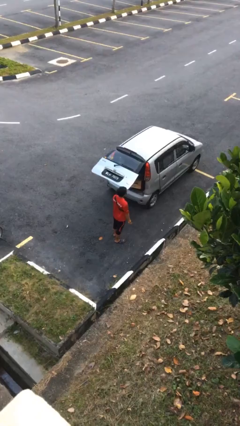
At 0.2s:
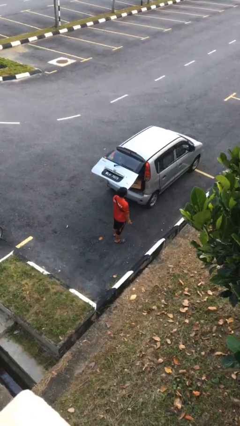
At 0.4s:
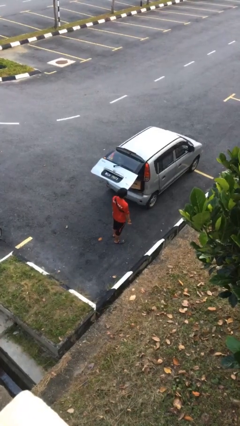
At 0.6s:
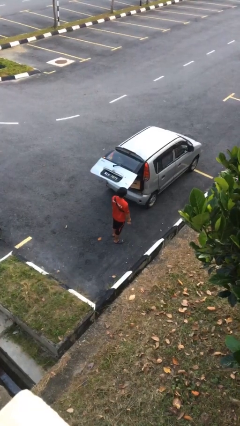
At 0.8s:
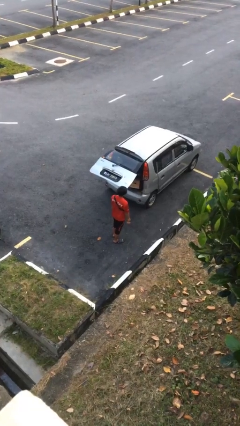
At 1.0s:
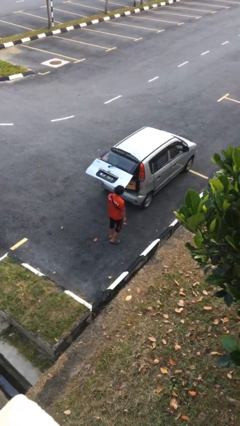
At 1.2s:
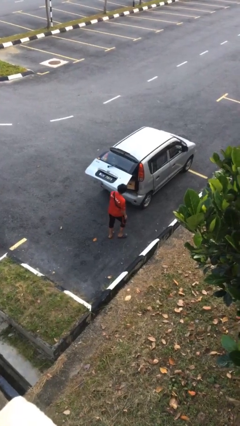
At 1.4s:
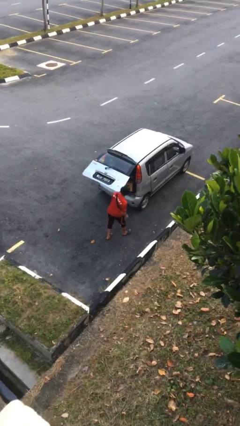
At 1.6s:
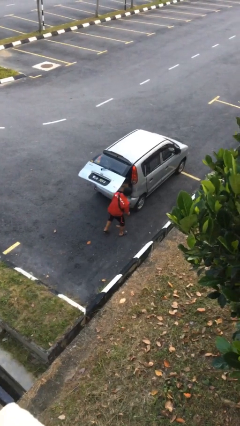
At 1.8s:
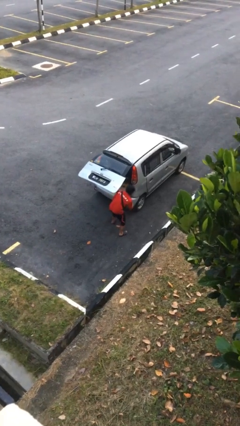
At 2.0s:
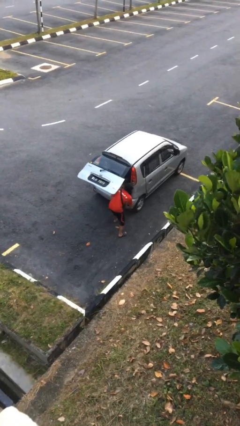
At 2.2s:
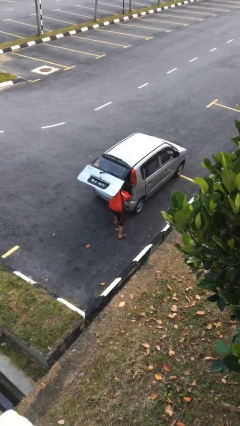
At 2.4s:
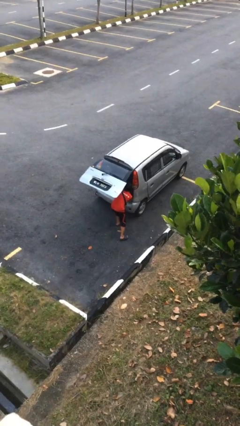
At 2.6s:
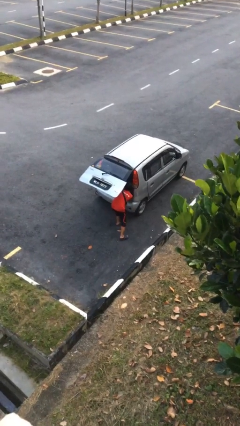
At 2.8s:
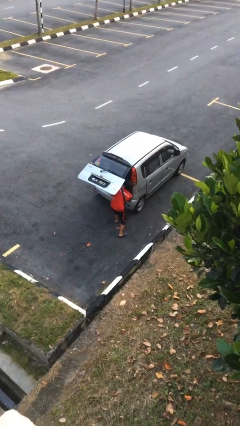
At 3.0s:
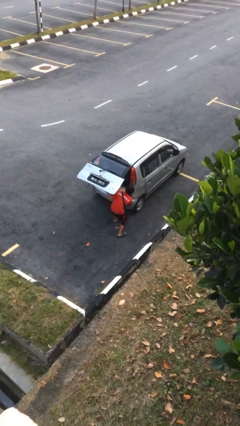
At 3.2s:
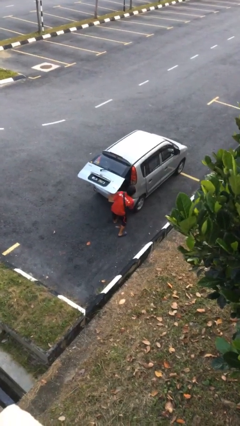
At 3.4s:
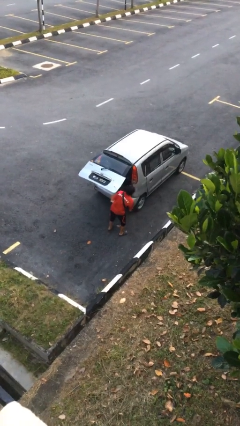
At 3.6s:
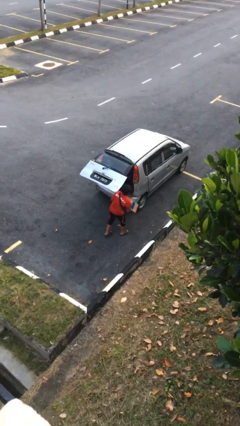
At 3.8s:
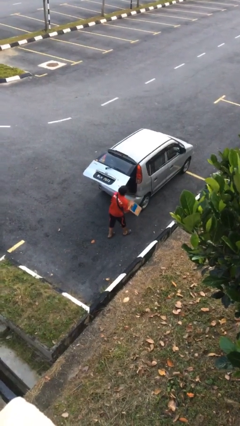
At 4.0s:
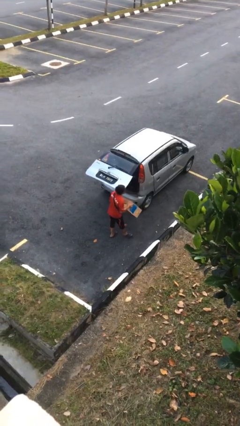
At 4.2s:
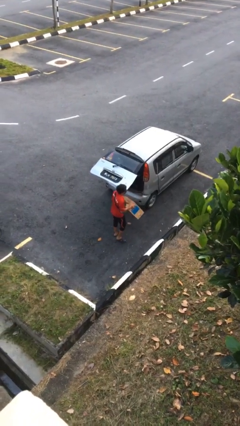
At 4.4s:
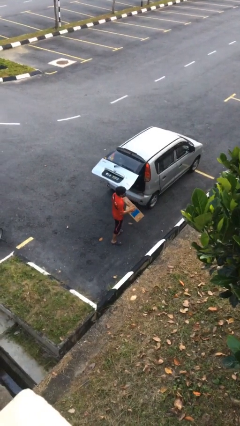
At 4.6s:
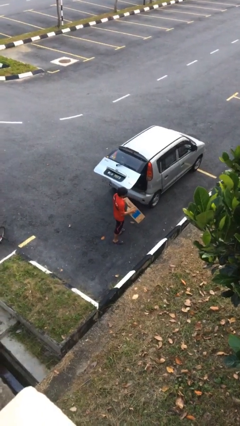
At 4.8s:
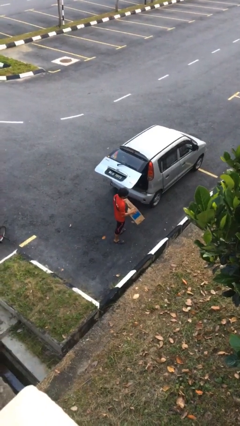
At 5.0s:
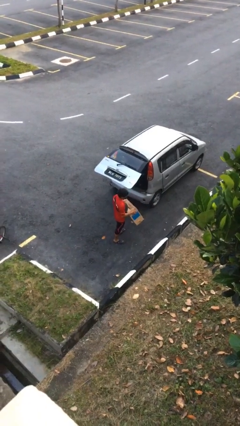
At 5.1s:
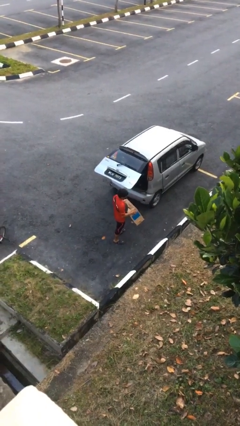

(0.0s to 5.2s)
person unloads car

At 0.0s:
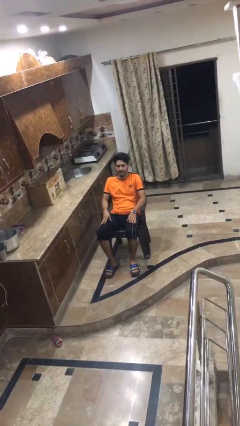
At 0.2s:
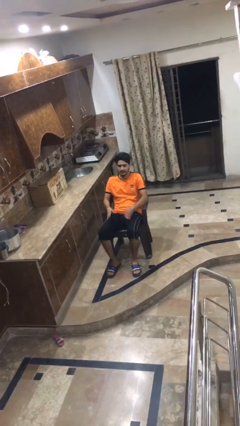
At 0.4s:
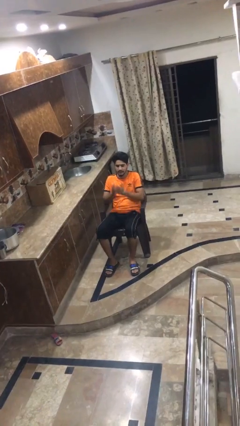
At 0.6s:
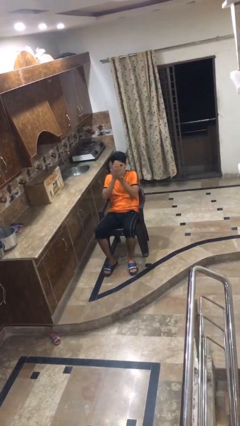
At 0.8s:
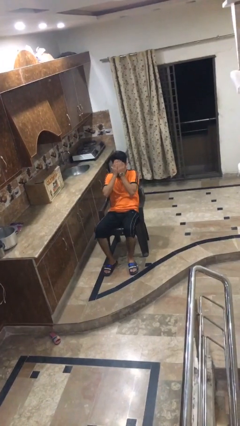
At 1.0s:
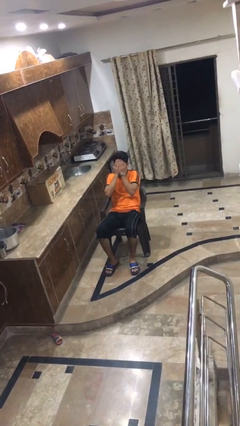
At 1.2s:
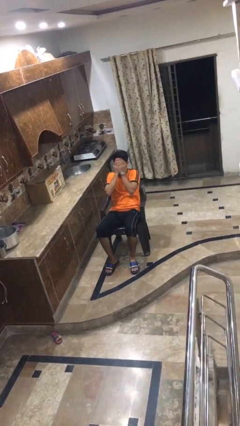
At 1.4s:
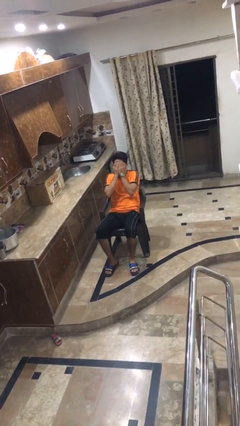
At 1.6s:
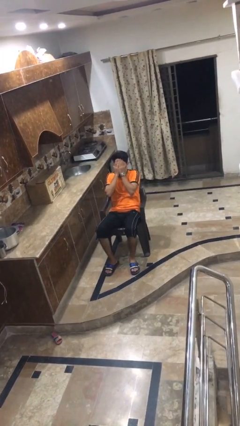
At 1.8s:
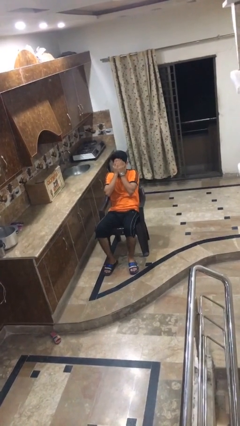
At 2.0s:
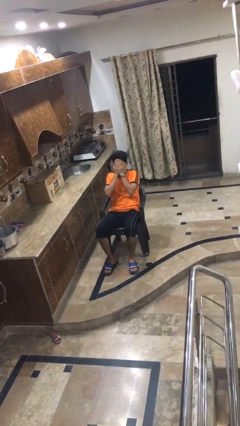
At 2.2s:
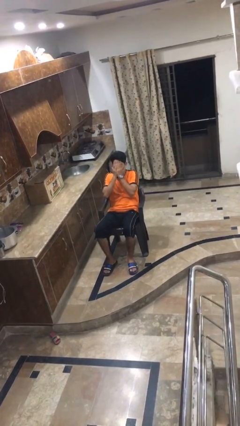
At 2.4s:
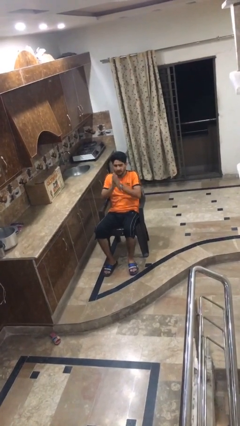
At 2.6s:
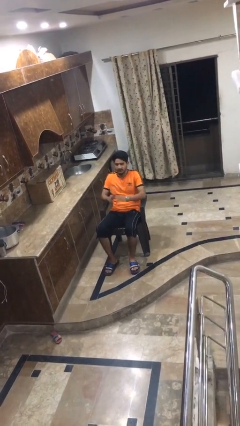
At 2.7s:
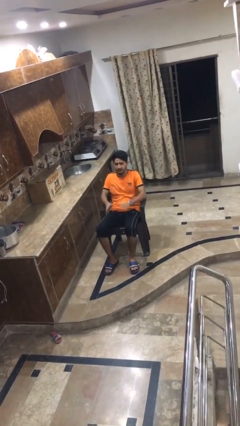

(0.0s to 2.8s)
person covers face with hands

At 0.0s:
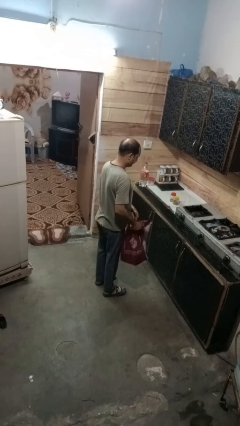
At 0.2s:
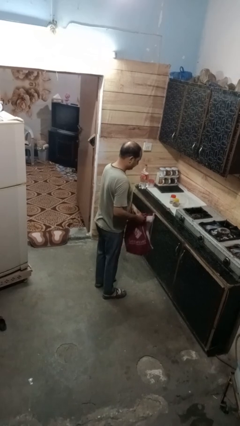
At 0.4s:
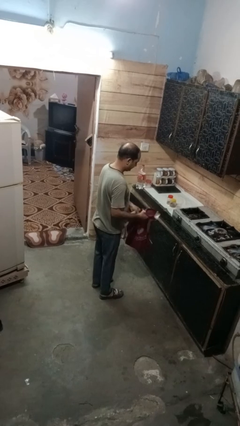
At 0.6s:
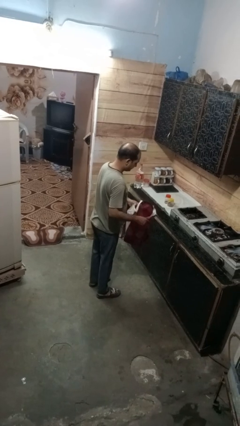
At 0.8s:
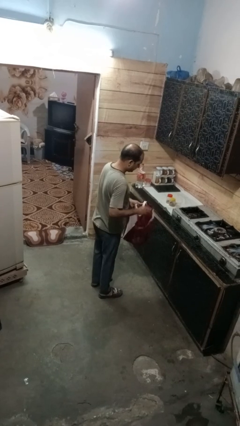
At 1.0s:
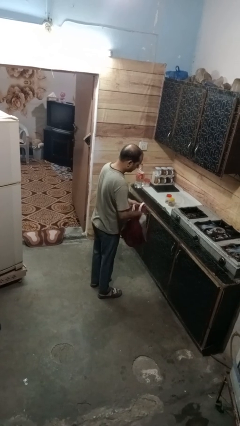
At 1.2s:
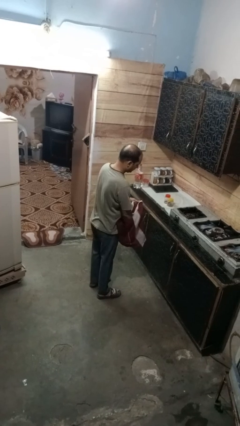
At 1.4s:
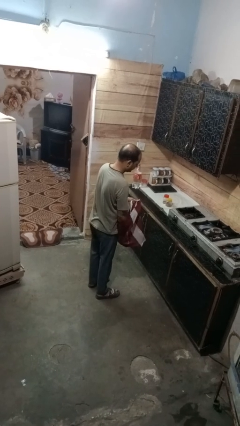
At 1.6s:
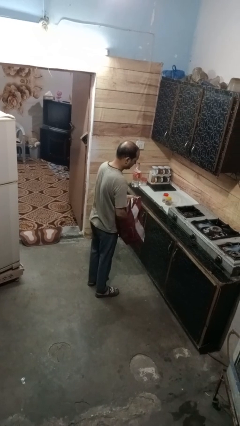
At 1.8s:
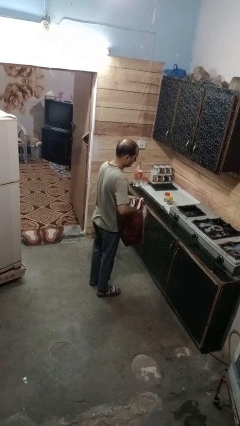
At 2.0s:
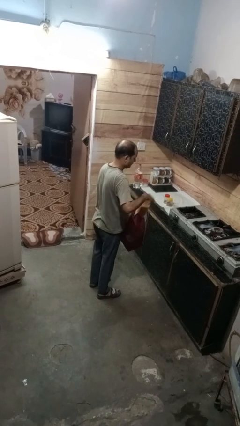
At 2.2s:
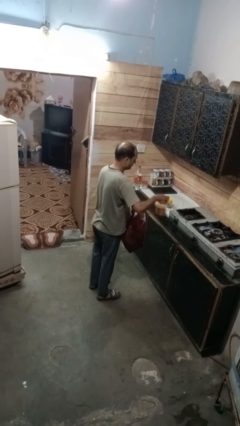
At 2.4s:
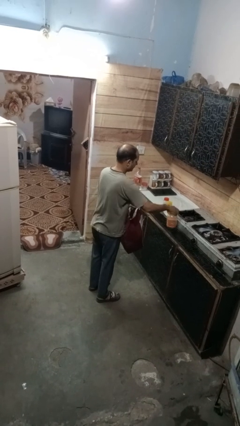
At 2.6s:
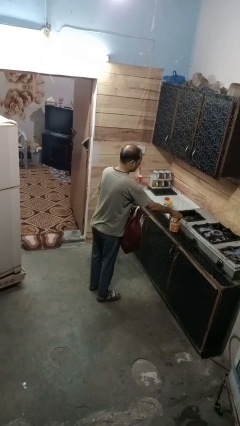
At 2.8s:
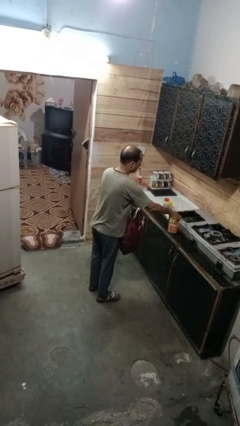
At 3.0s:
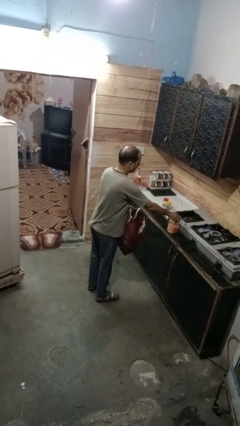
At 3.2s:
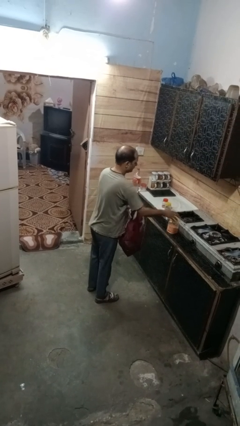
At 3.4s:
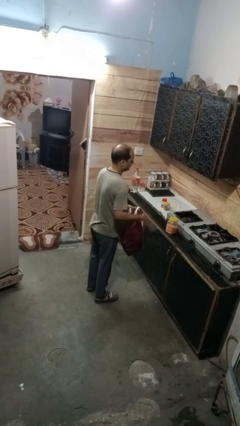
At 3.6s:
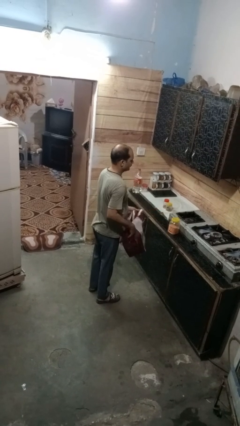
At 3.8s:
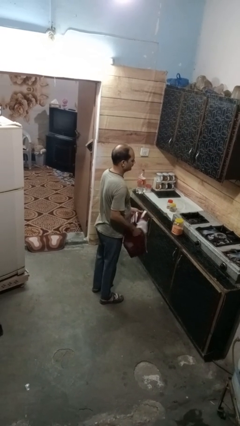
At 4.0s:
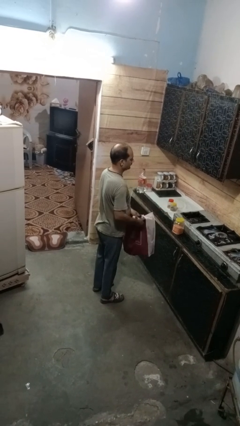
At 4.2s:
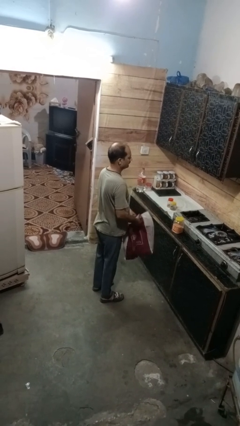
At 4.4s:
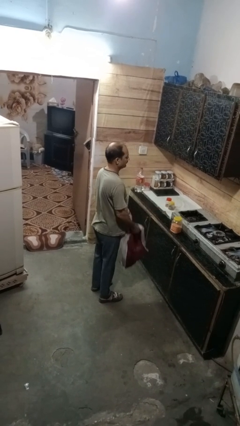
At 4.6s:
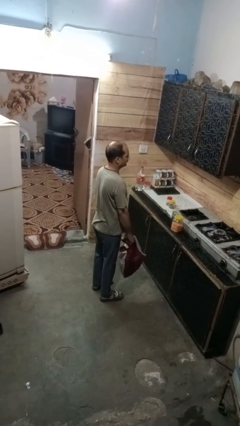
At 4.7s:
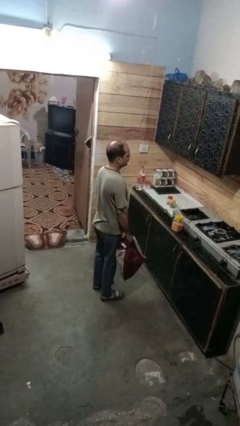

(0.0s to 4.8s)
person takes object from bag

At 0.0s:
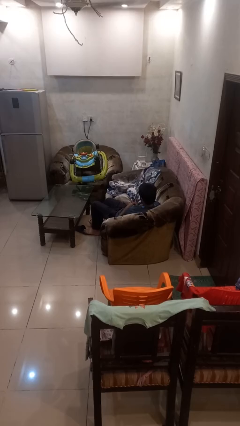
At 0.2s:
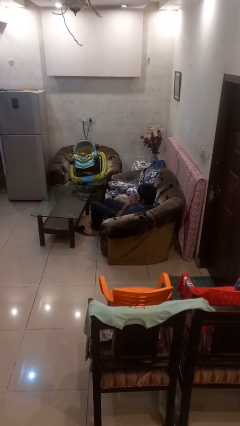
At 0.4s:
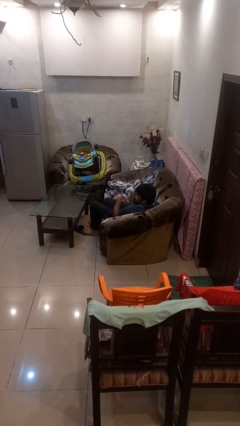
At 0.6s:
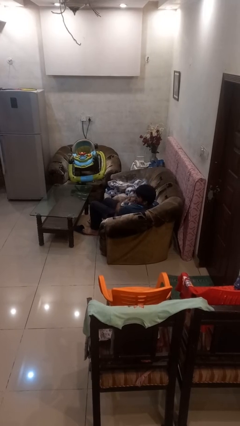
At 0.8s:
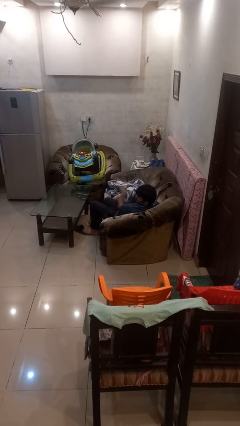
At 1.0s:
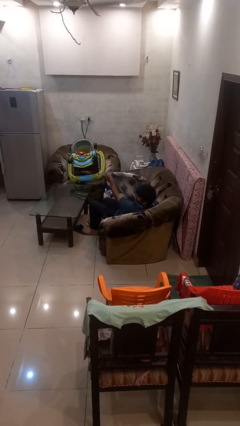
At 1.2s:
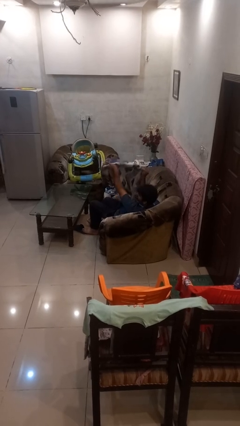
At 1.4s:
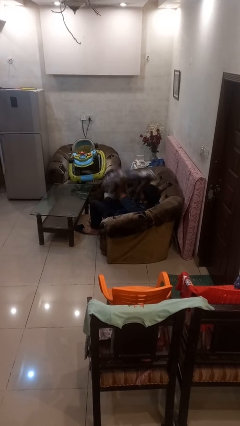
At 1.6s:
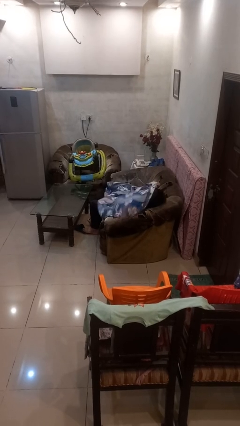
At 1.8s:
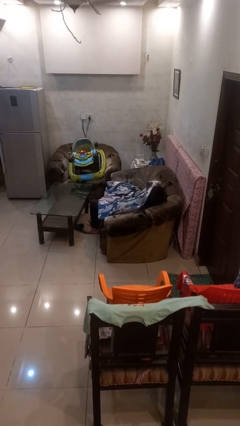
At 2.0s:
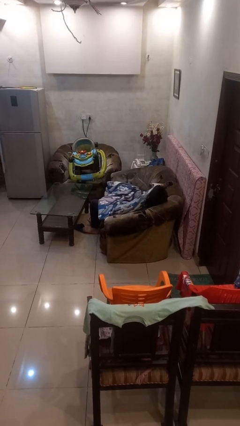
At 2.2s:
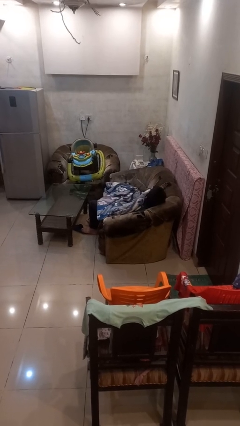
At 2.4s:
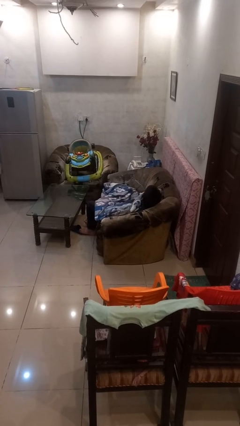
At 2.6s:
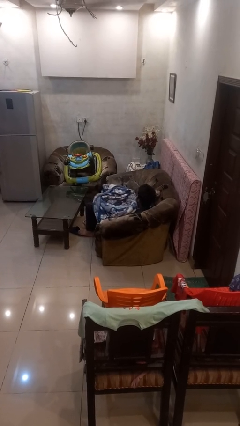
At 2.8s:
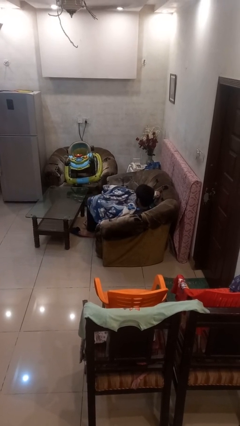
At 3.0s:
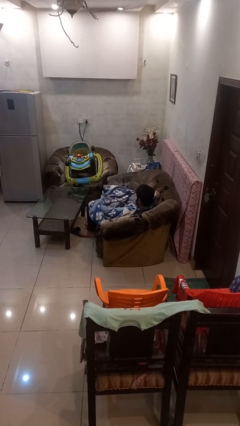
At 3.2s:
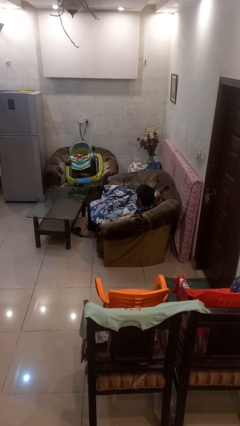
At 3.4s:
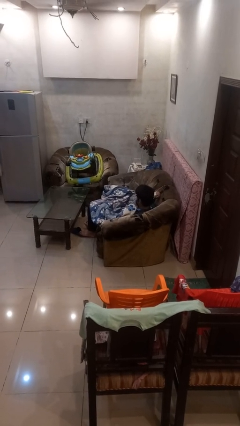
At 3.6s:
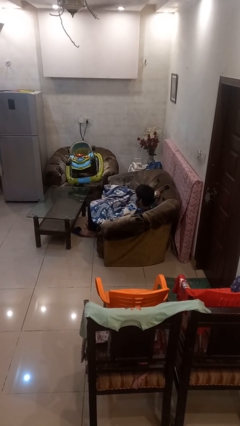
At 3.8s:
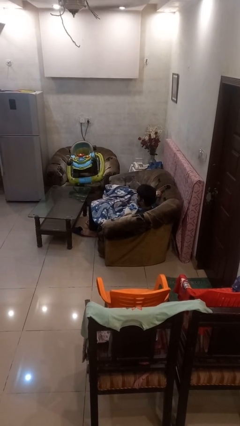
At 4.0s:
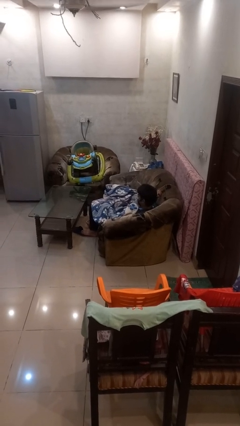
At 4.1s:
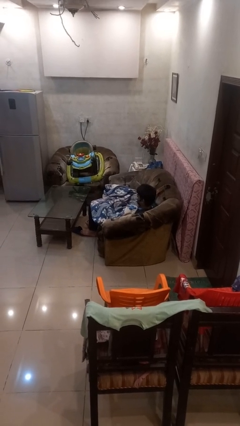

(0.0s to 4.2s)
person covers with blanket

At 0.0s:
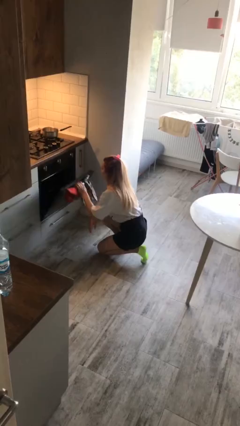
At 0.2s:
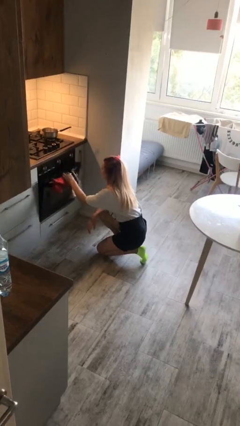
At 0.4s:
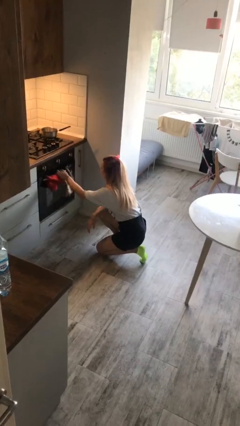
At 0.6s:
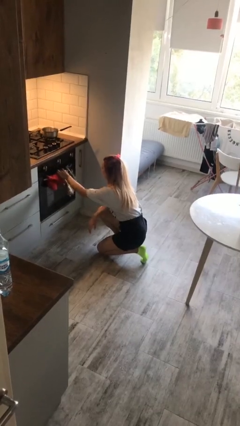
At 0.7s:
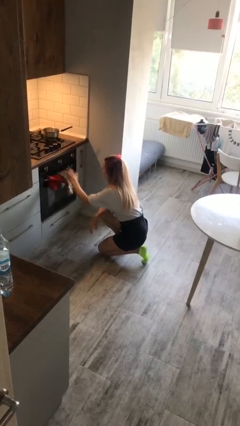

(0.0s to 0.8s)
person closes oven door
